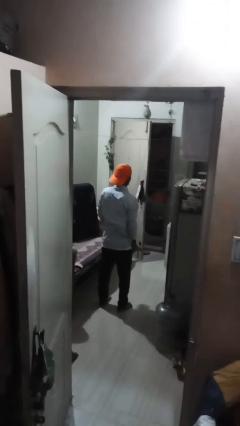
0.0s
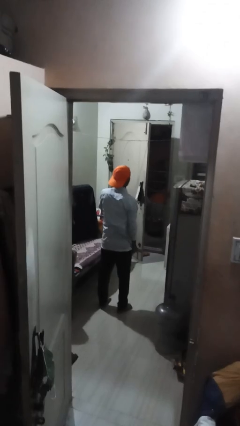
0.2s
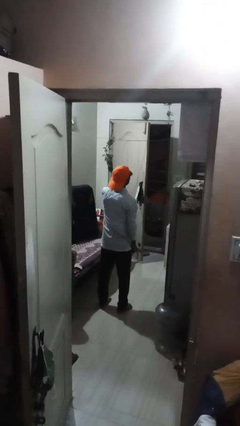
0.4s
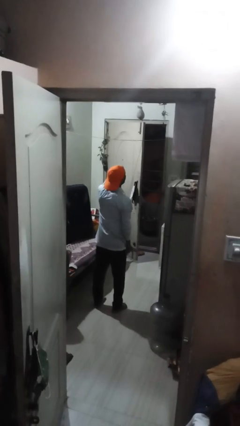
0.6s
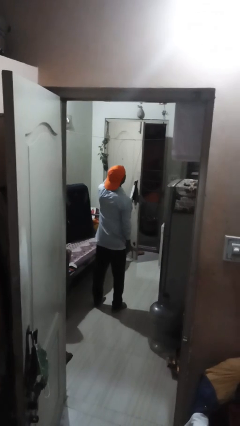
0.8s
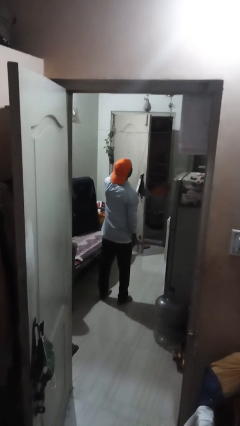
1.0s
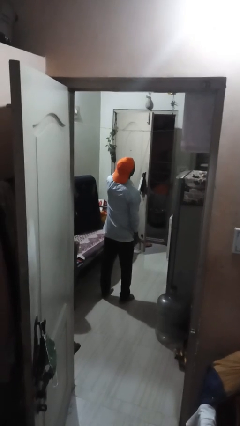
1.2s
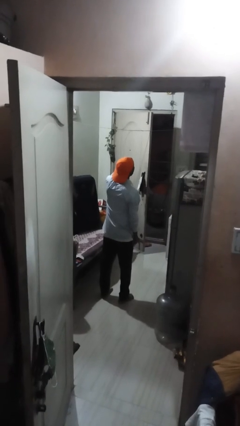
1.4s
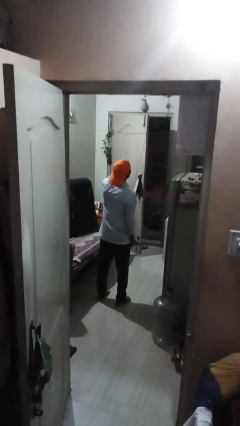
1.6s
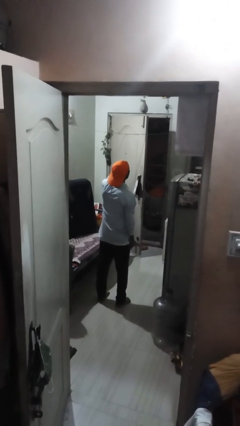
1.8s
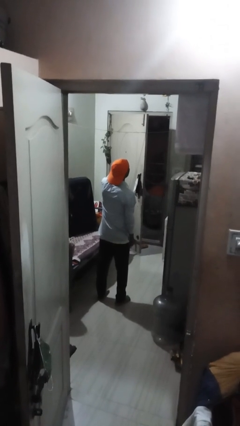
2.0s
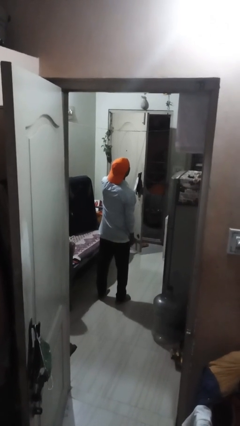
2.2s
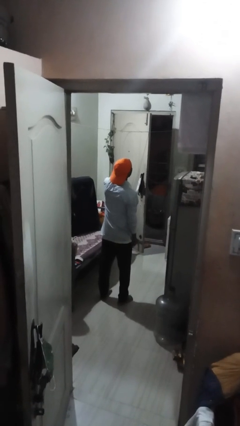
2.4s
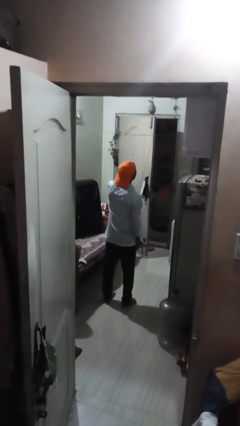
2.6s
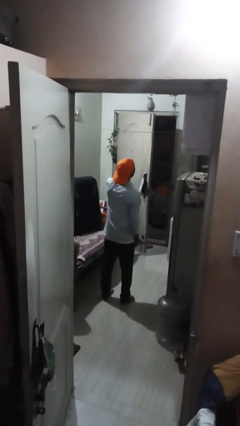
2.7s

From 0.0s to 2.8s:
person covers face with hands

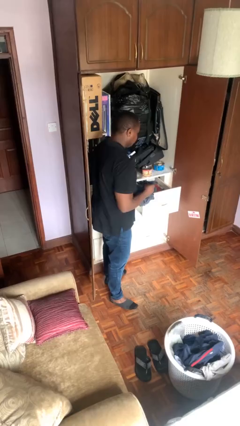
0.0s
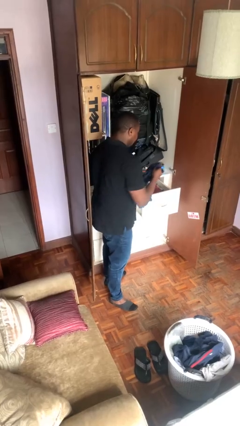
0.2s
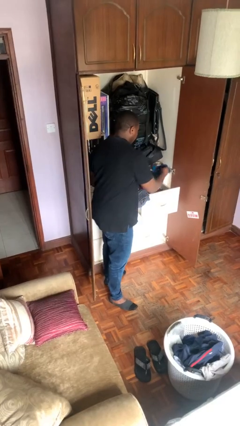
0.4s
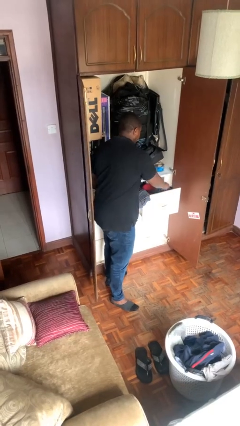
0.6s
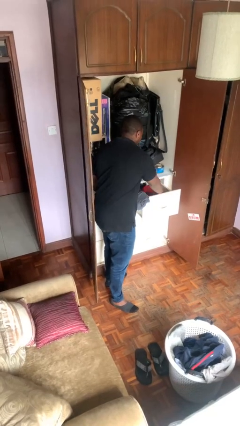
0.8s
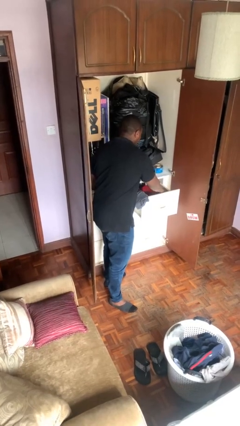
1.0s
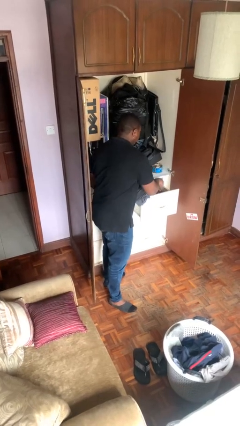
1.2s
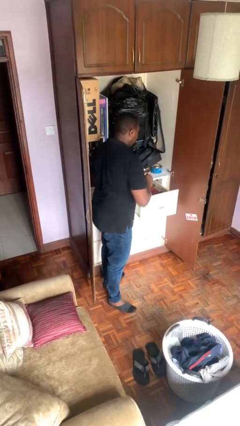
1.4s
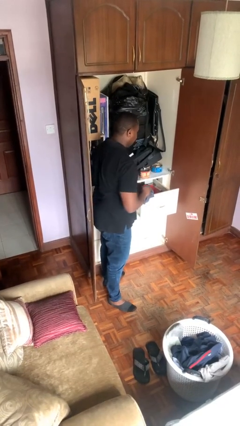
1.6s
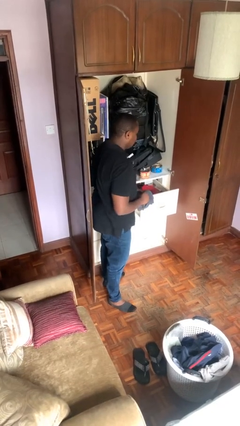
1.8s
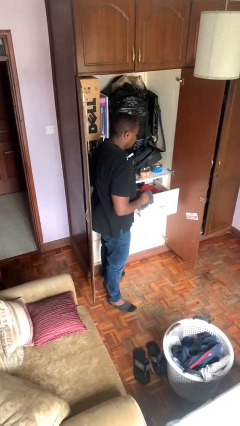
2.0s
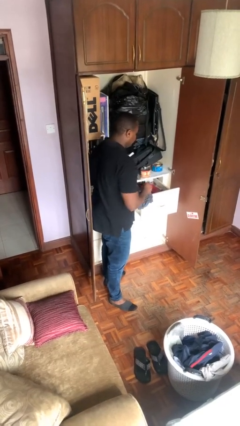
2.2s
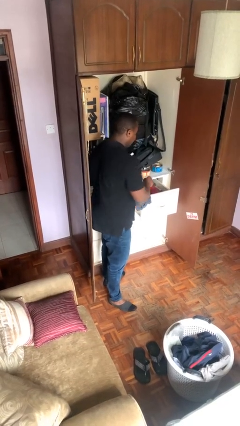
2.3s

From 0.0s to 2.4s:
person puts clothes into dresser

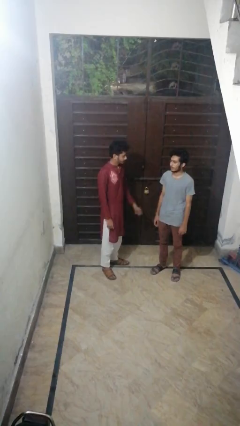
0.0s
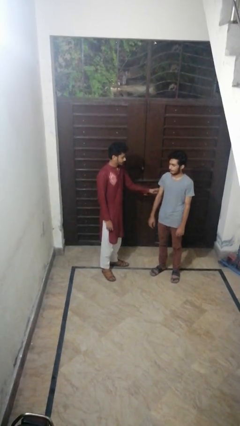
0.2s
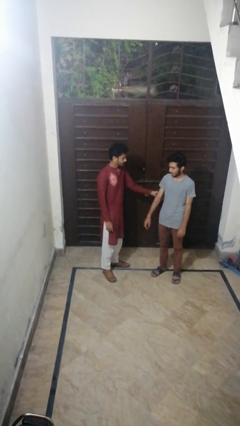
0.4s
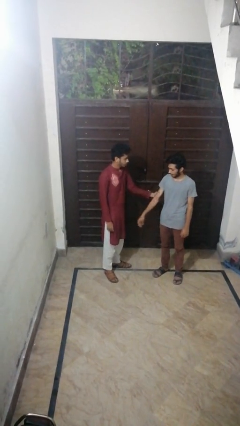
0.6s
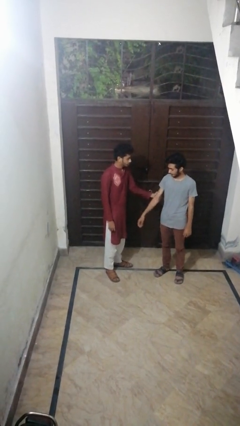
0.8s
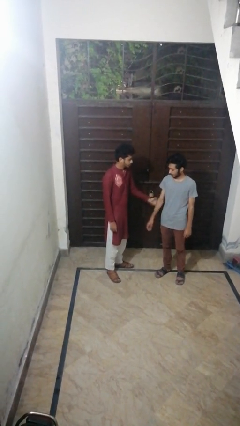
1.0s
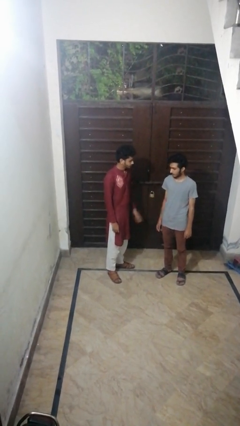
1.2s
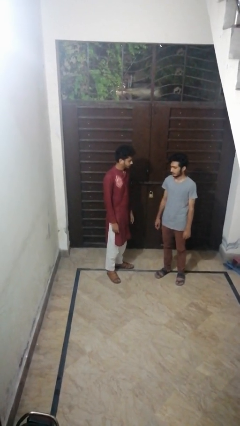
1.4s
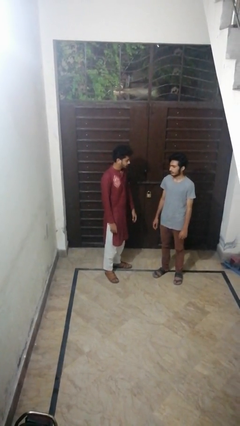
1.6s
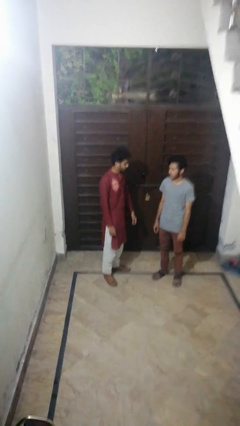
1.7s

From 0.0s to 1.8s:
person grabs person by bicep

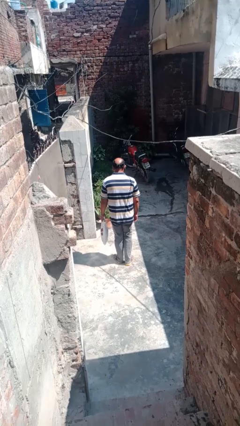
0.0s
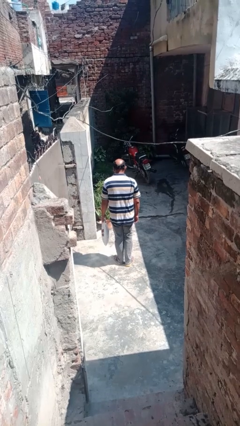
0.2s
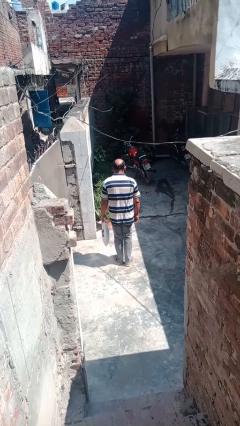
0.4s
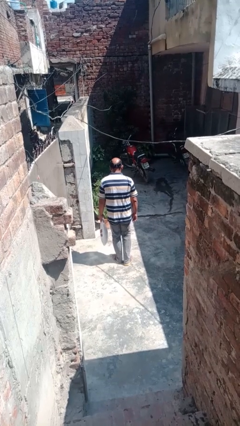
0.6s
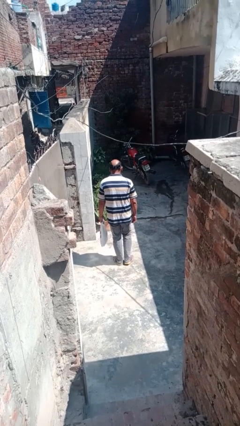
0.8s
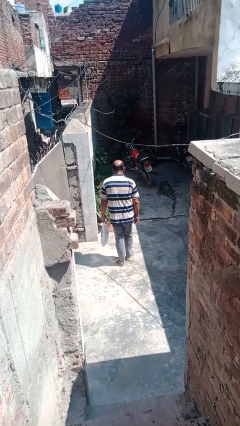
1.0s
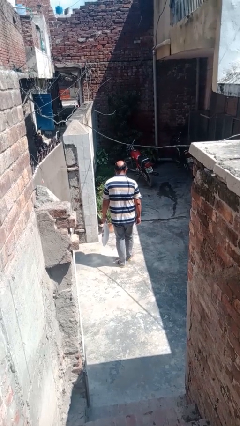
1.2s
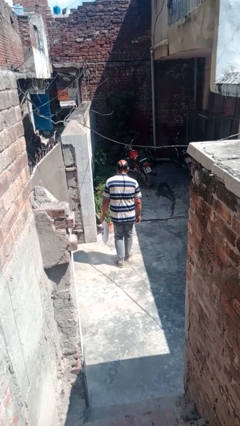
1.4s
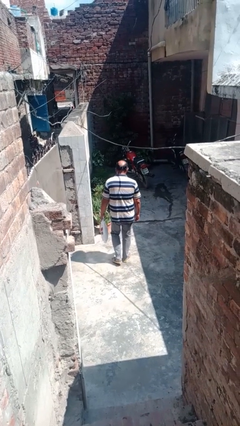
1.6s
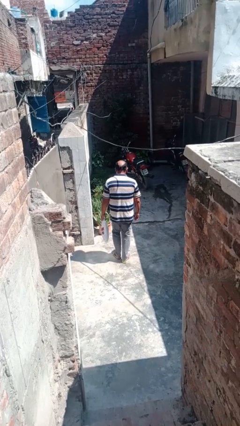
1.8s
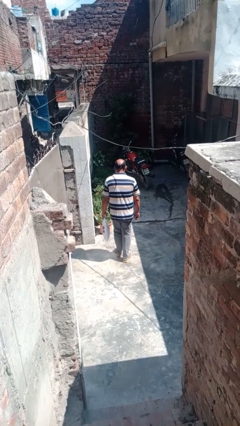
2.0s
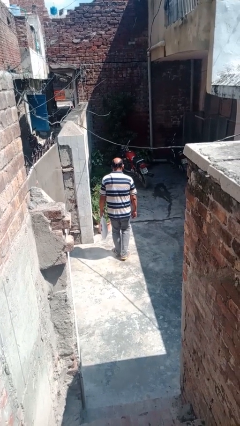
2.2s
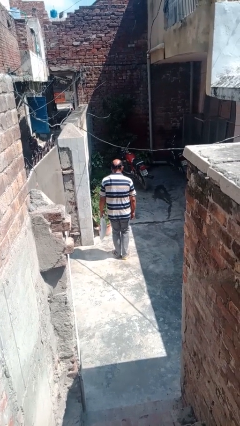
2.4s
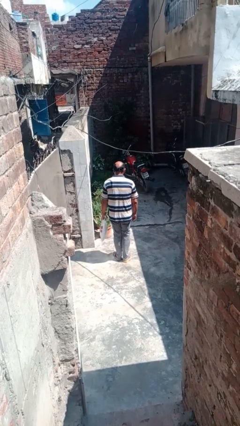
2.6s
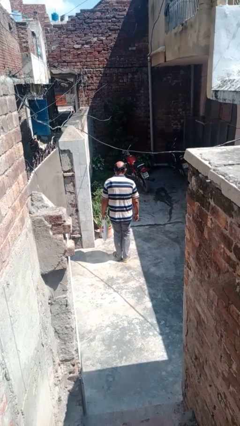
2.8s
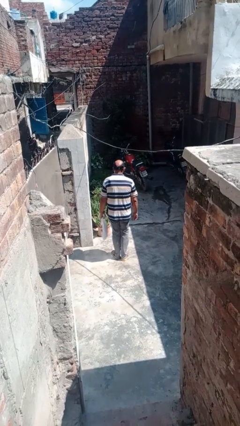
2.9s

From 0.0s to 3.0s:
person carries groceries

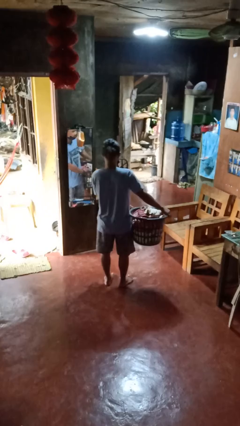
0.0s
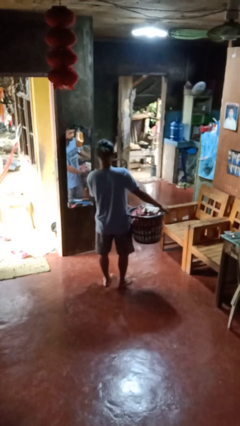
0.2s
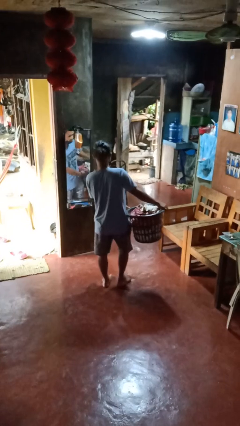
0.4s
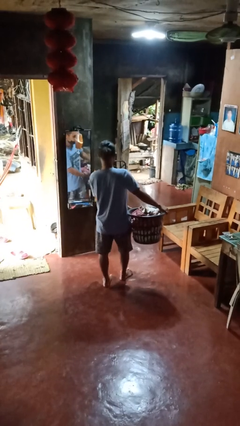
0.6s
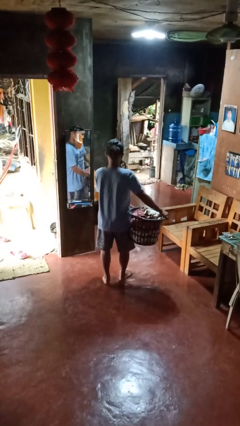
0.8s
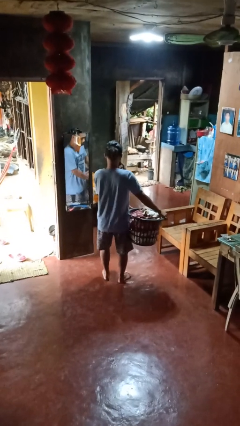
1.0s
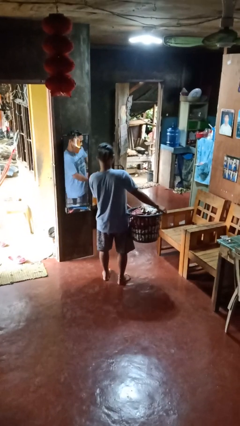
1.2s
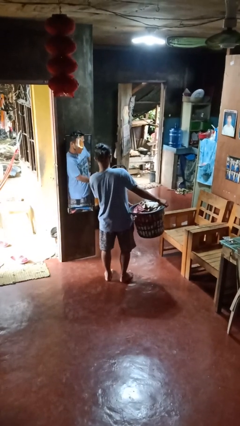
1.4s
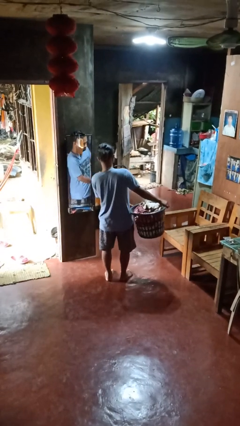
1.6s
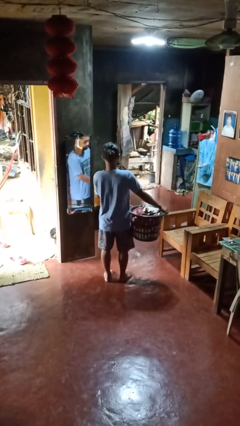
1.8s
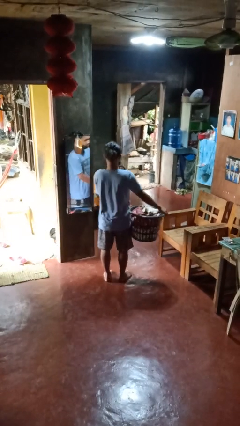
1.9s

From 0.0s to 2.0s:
person carries laundry basket

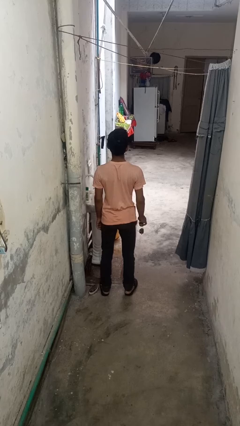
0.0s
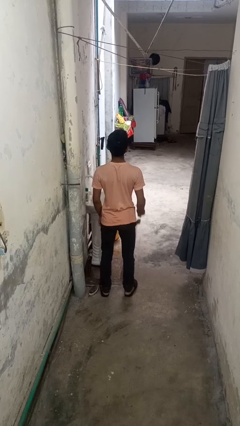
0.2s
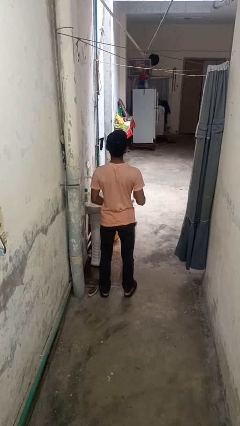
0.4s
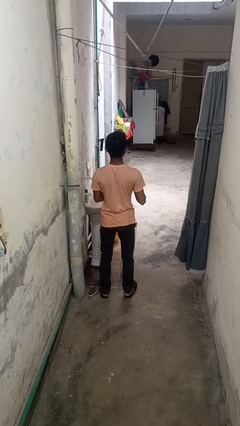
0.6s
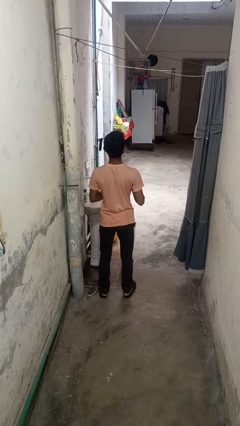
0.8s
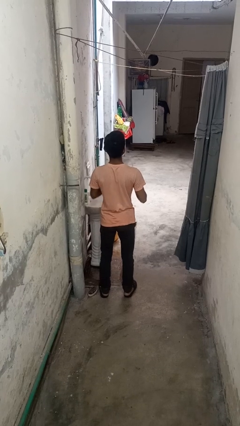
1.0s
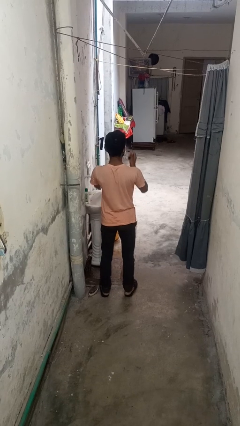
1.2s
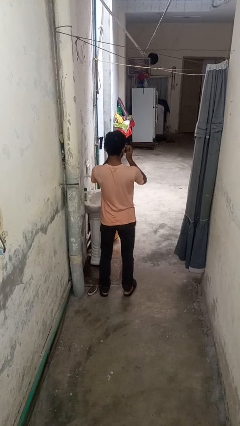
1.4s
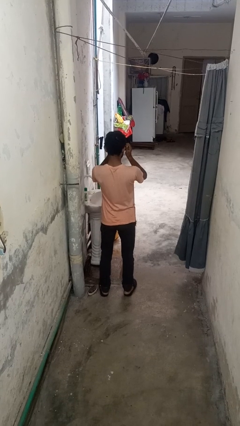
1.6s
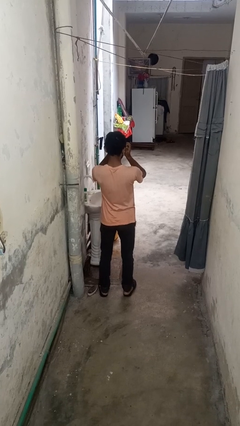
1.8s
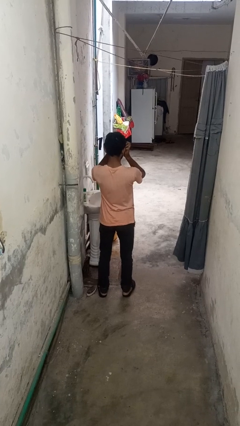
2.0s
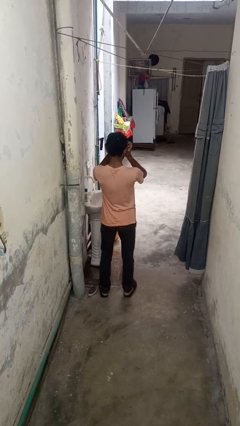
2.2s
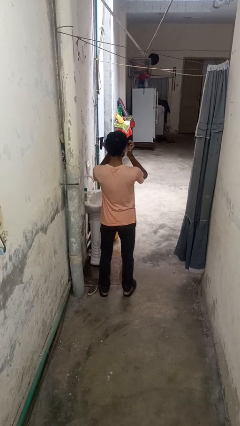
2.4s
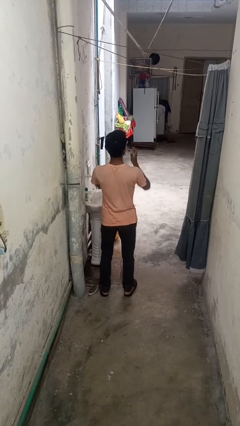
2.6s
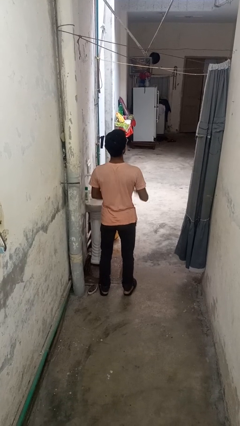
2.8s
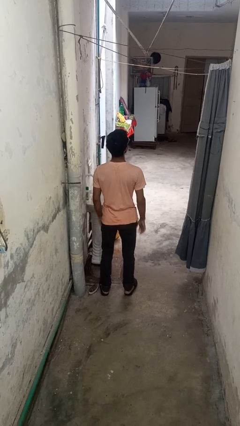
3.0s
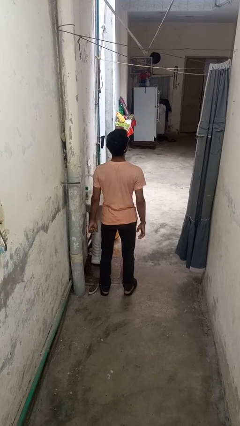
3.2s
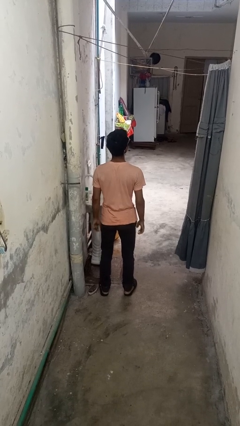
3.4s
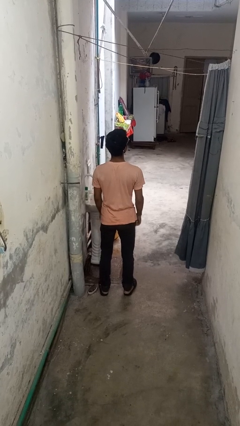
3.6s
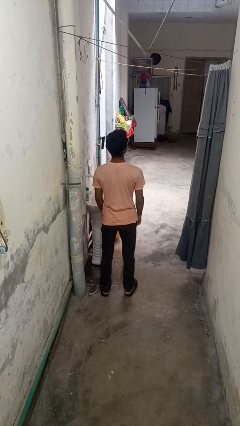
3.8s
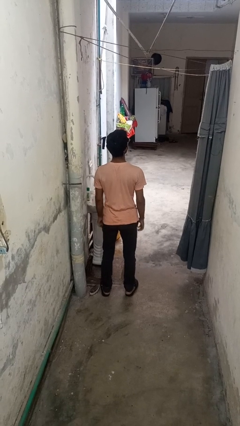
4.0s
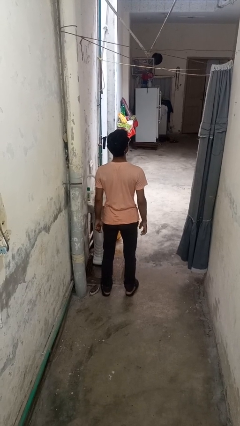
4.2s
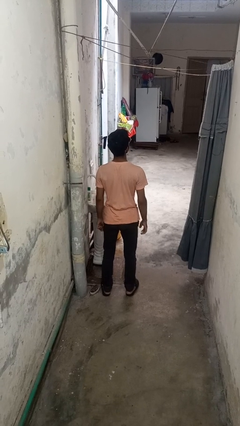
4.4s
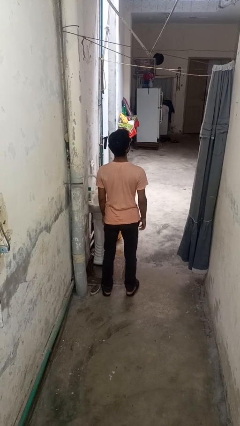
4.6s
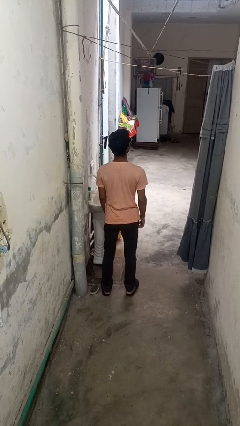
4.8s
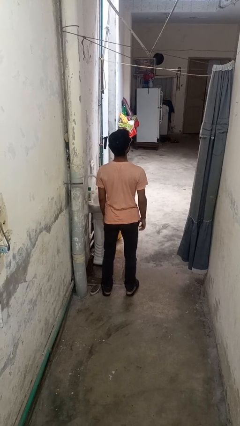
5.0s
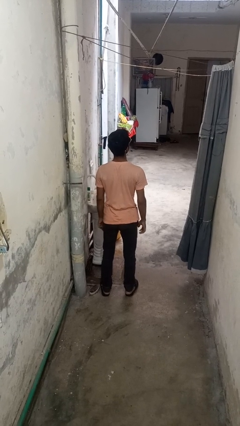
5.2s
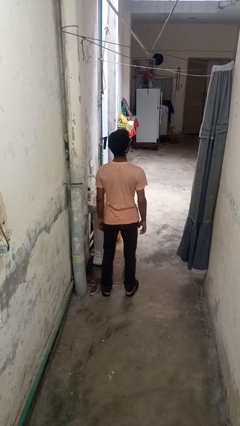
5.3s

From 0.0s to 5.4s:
person puts on sunglasses
